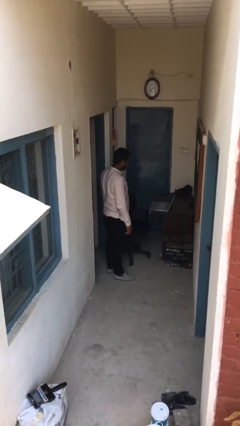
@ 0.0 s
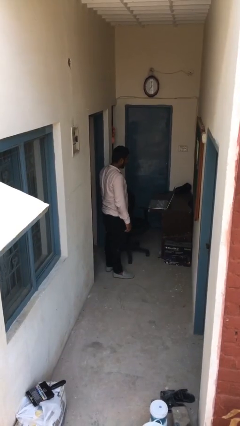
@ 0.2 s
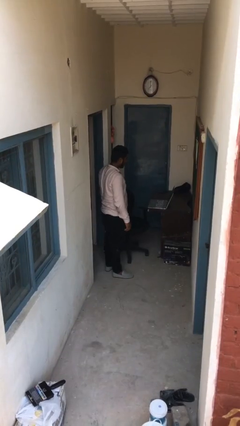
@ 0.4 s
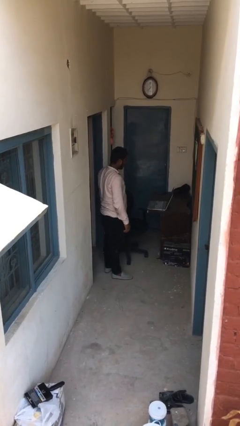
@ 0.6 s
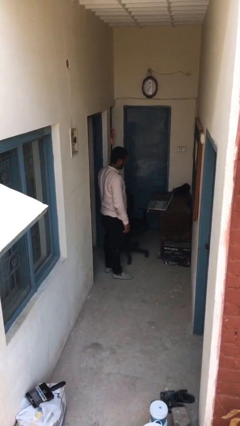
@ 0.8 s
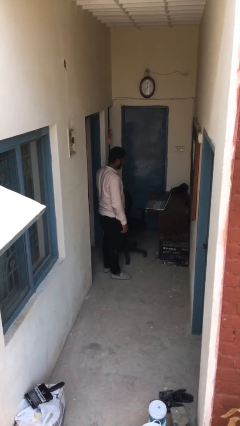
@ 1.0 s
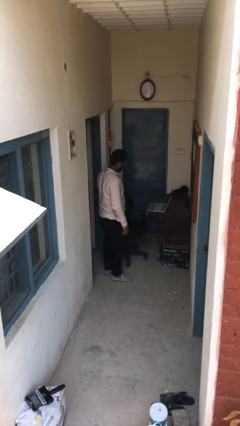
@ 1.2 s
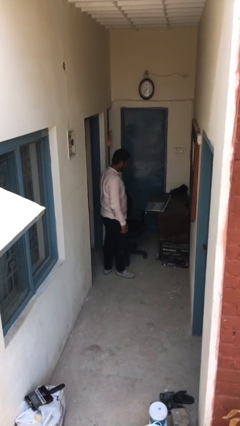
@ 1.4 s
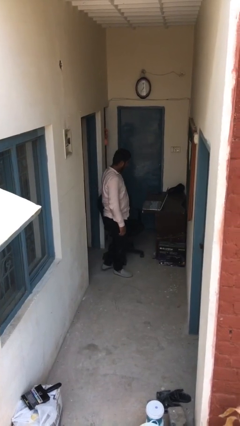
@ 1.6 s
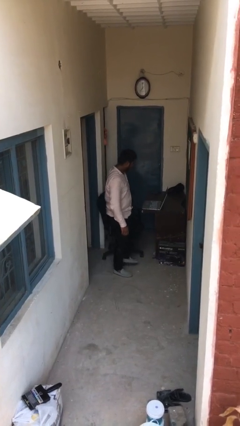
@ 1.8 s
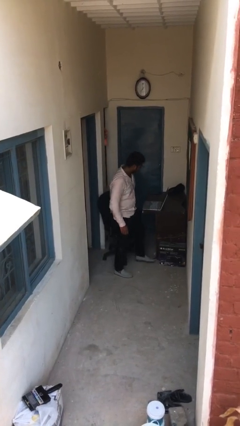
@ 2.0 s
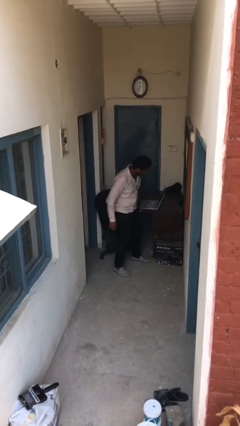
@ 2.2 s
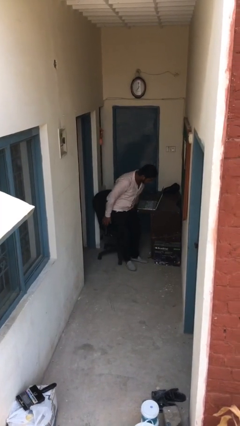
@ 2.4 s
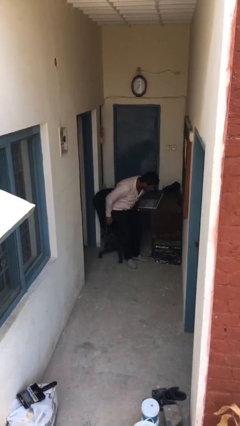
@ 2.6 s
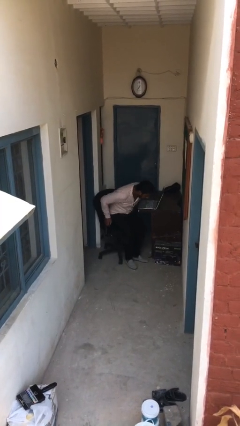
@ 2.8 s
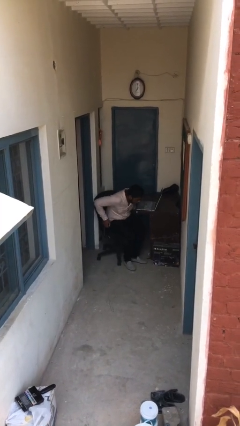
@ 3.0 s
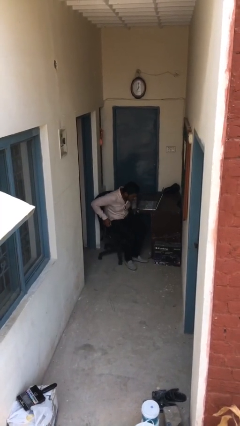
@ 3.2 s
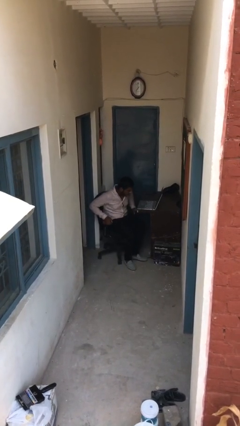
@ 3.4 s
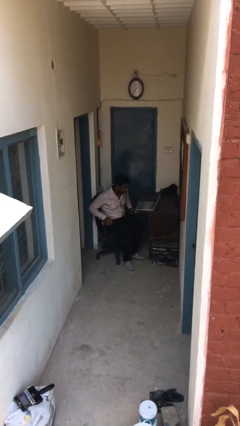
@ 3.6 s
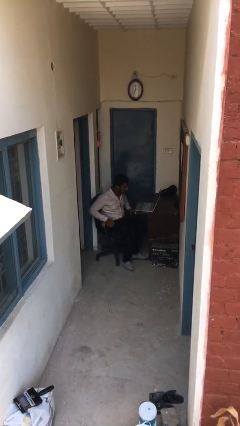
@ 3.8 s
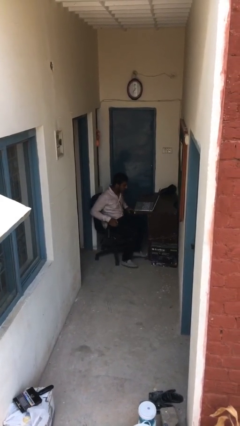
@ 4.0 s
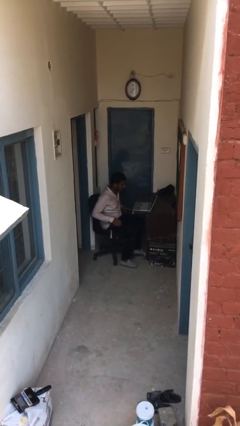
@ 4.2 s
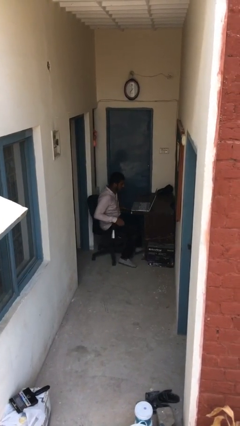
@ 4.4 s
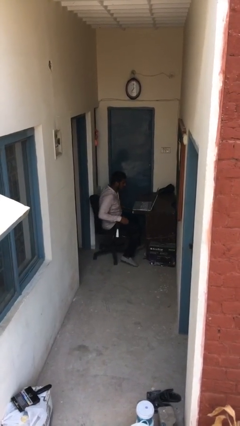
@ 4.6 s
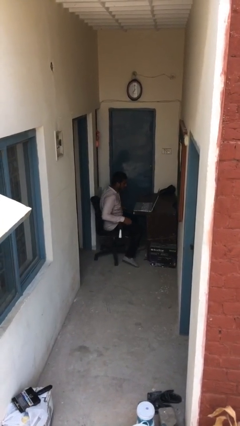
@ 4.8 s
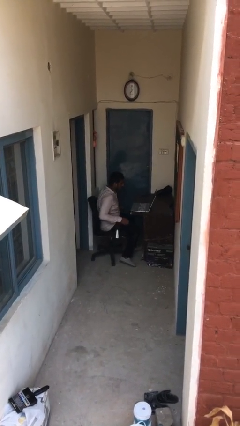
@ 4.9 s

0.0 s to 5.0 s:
person sits down

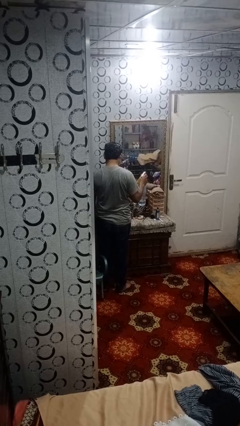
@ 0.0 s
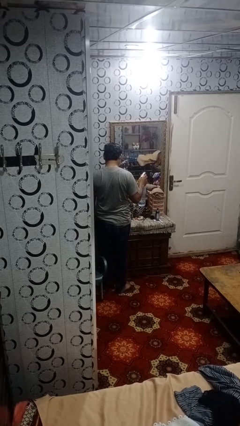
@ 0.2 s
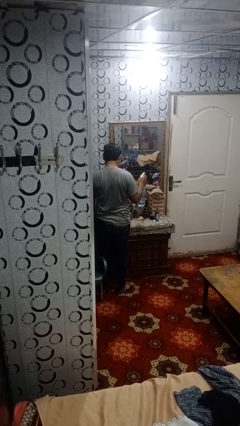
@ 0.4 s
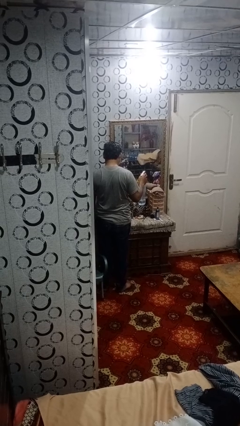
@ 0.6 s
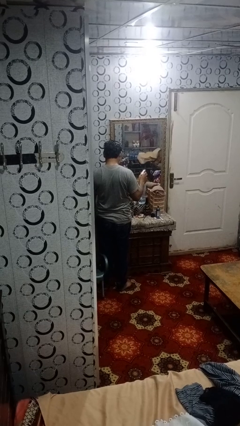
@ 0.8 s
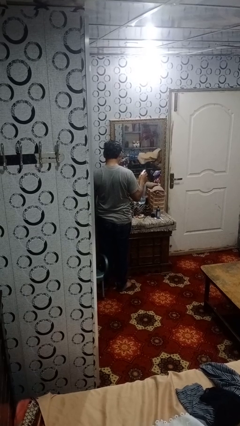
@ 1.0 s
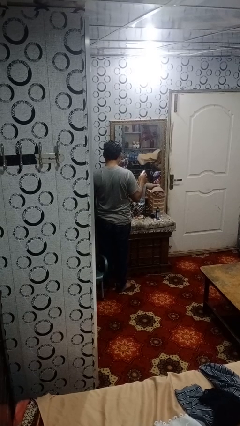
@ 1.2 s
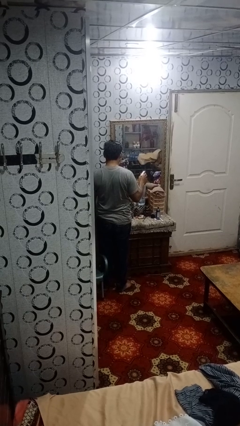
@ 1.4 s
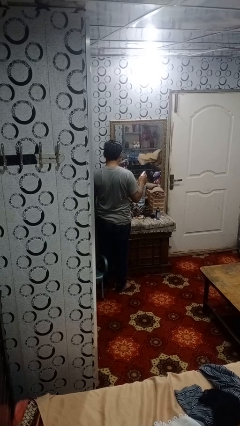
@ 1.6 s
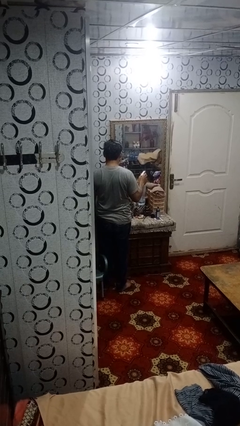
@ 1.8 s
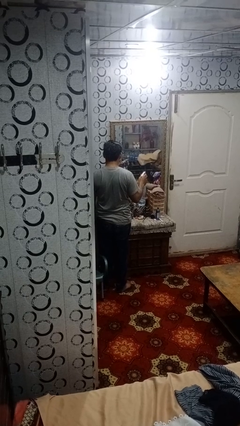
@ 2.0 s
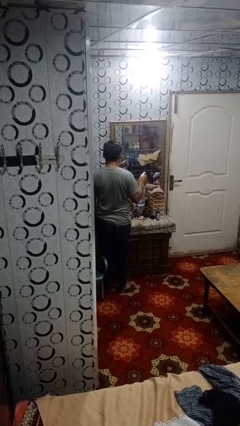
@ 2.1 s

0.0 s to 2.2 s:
person sprays from bottle

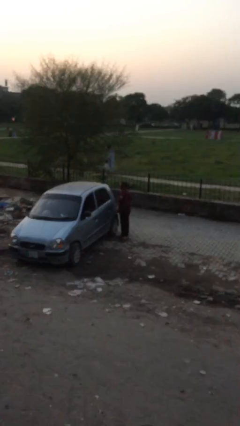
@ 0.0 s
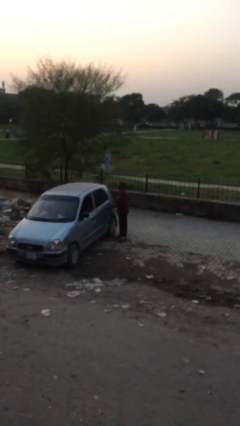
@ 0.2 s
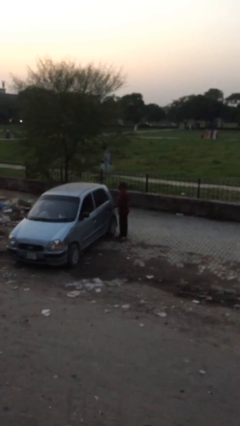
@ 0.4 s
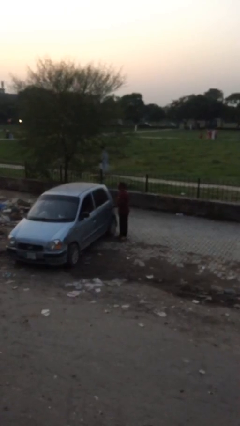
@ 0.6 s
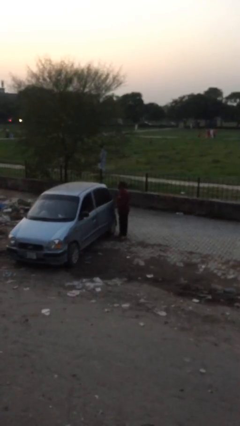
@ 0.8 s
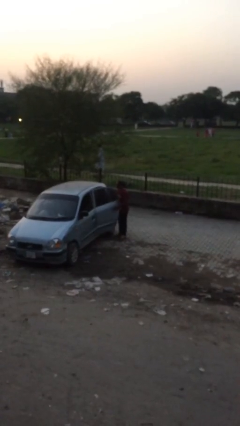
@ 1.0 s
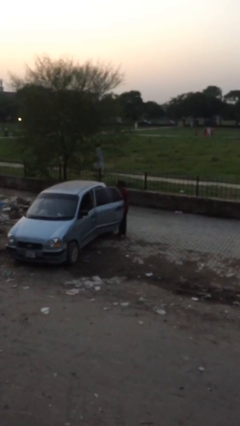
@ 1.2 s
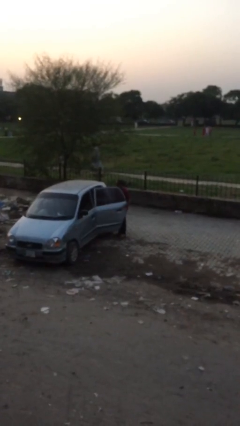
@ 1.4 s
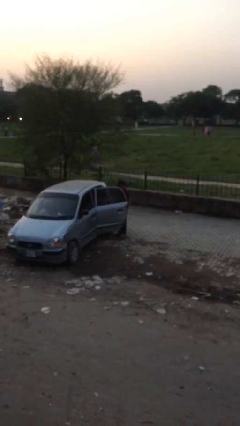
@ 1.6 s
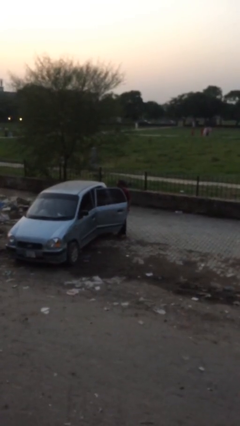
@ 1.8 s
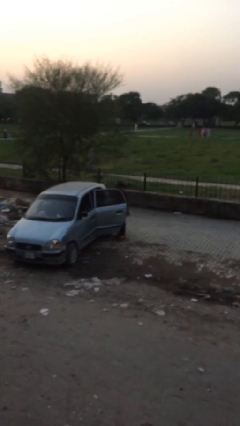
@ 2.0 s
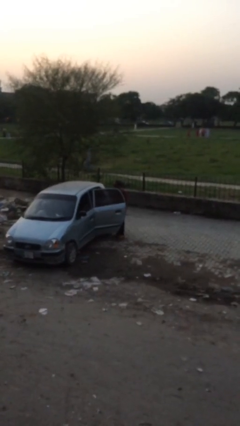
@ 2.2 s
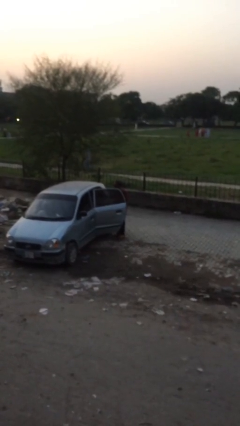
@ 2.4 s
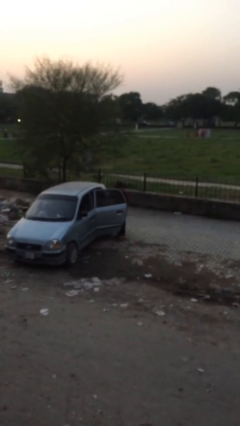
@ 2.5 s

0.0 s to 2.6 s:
person opens car door

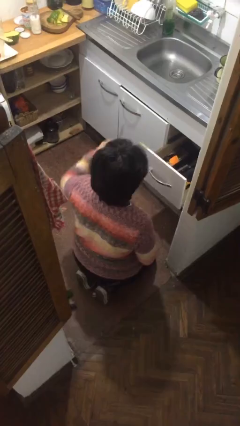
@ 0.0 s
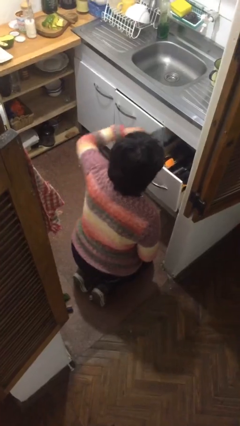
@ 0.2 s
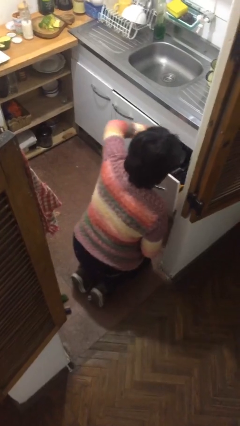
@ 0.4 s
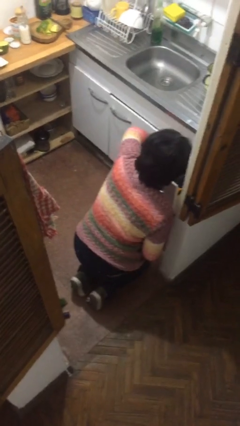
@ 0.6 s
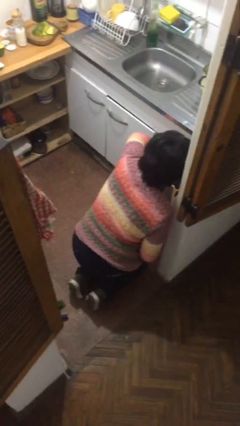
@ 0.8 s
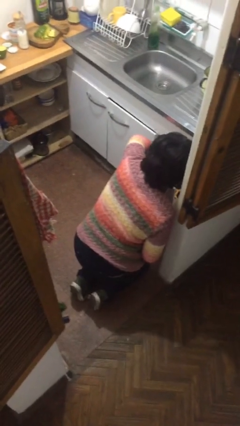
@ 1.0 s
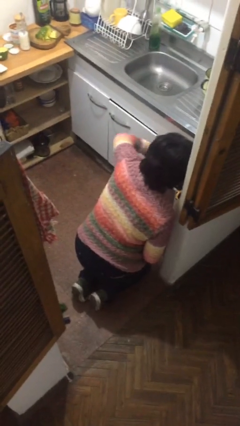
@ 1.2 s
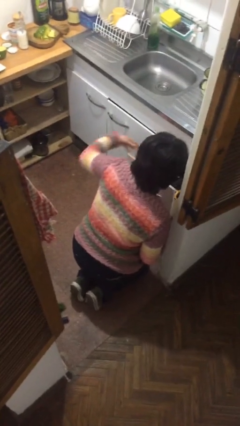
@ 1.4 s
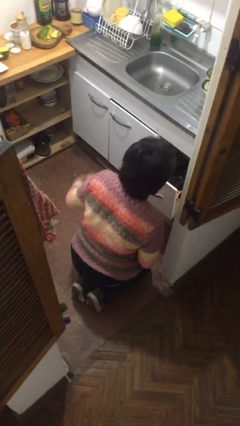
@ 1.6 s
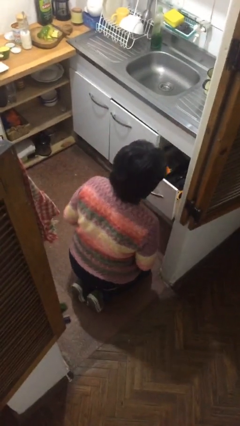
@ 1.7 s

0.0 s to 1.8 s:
person puts object into kitchen drawer

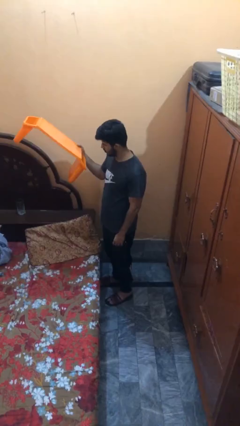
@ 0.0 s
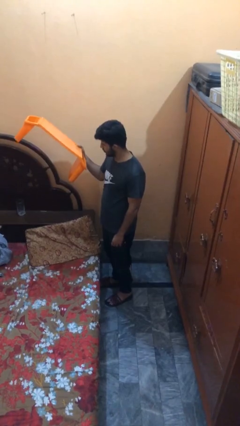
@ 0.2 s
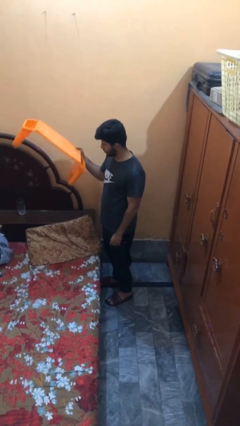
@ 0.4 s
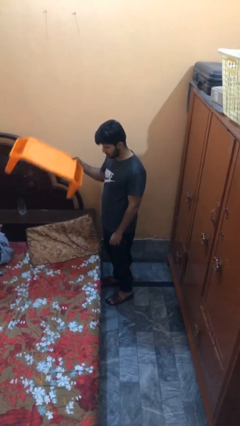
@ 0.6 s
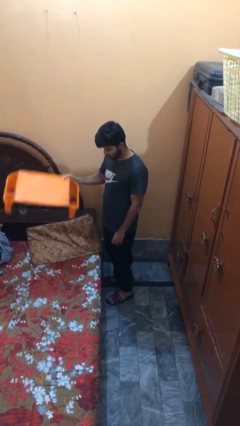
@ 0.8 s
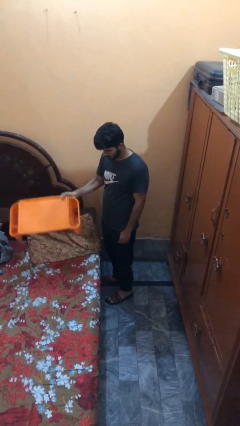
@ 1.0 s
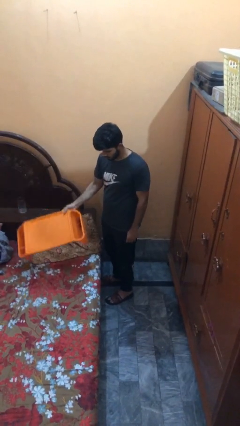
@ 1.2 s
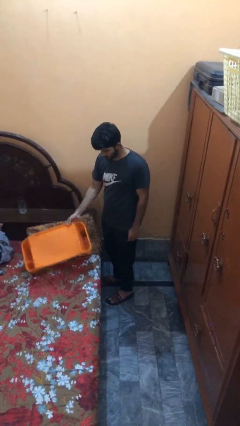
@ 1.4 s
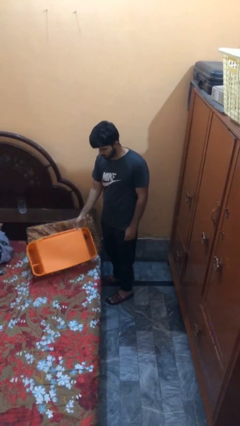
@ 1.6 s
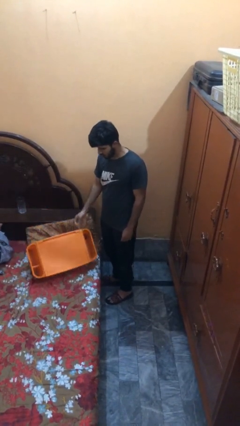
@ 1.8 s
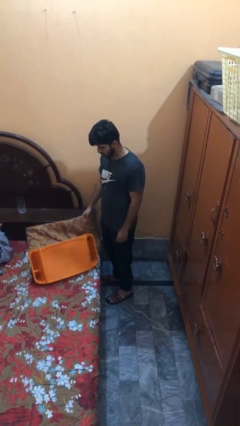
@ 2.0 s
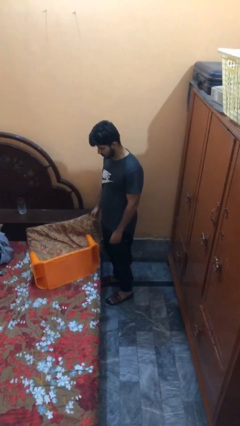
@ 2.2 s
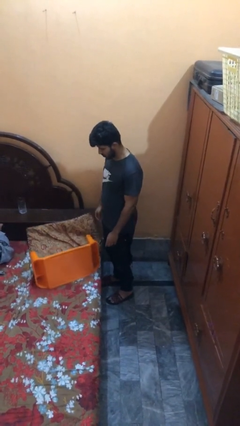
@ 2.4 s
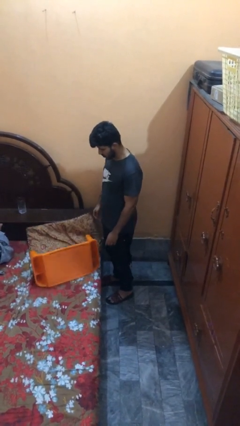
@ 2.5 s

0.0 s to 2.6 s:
person puts down object on bed

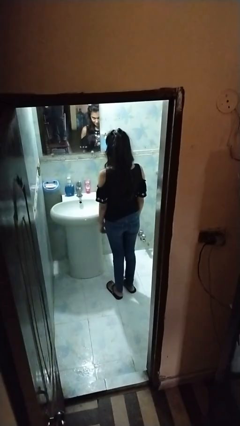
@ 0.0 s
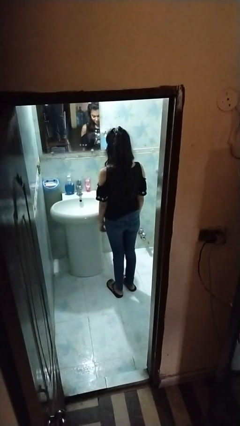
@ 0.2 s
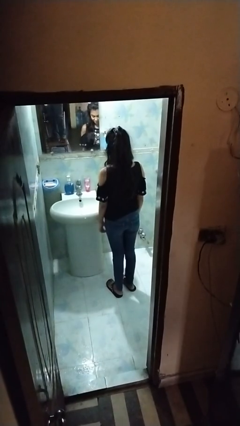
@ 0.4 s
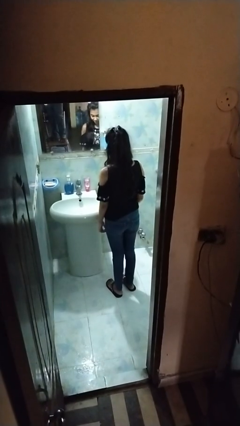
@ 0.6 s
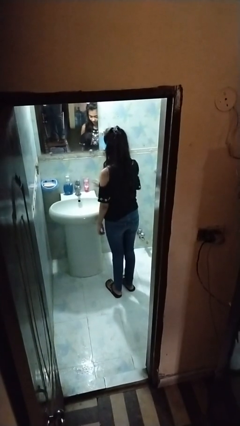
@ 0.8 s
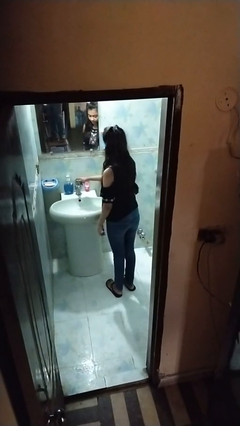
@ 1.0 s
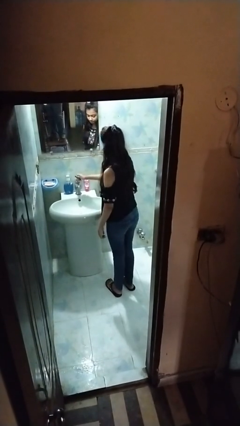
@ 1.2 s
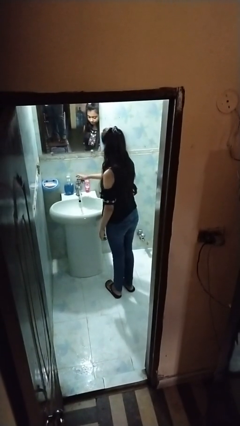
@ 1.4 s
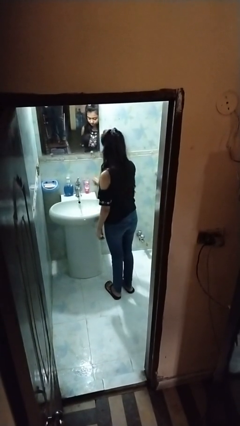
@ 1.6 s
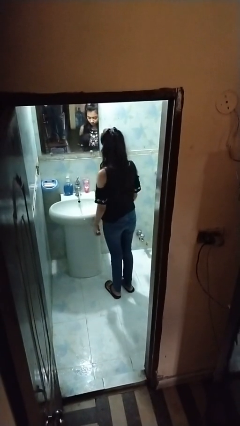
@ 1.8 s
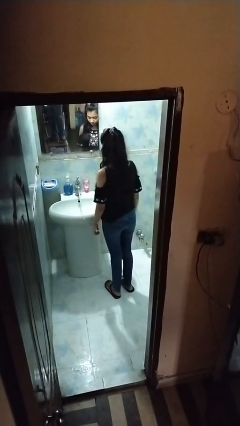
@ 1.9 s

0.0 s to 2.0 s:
person turns on faucet

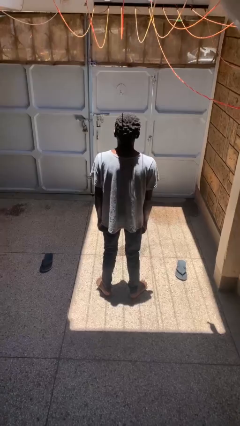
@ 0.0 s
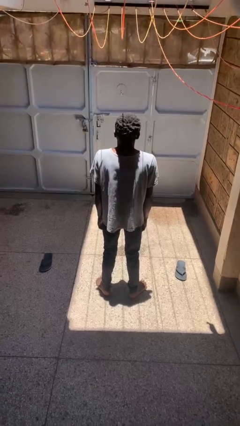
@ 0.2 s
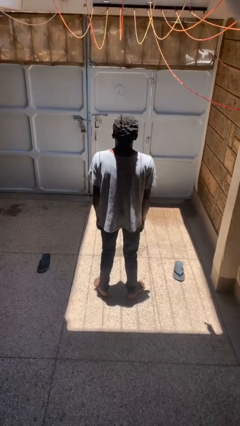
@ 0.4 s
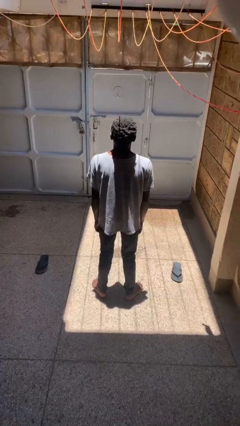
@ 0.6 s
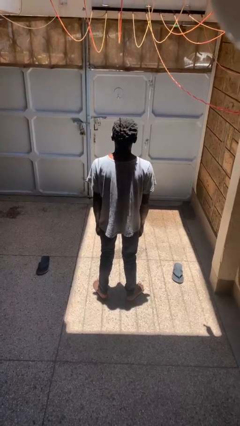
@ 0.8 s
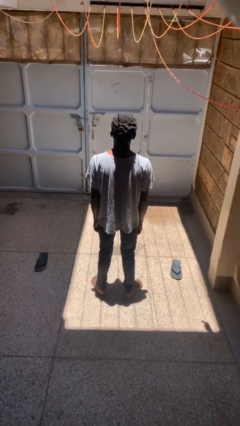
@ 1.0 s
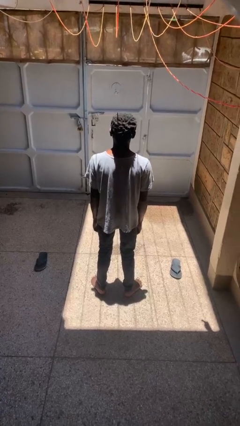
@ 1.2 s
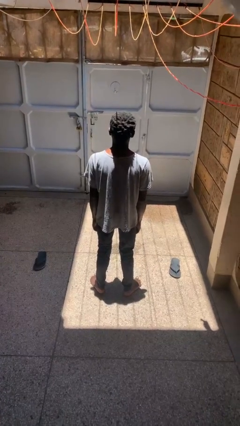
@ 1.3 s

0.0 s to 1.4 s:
person shrugs
